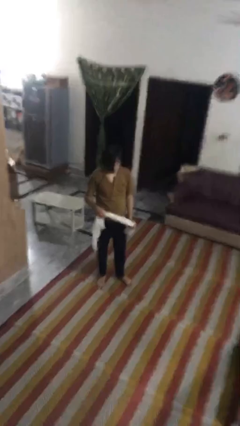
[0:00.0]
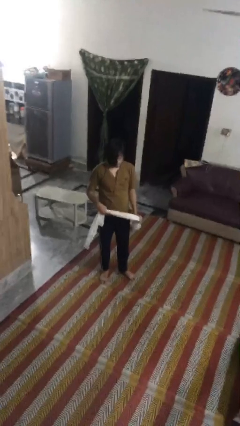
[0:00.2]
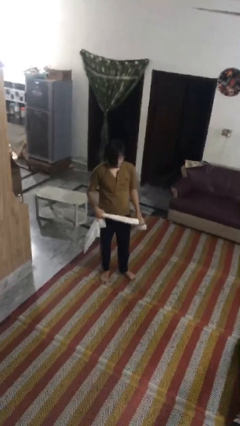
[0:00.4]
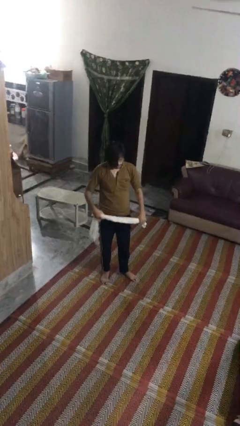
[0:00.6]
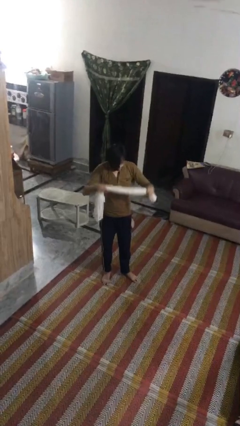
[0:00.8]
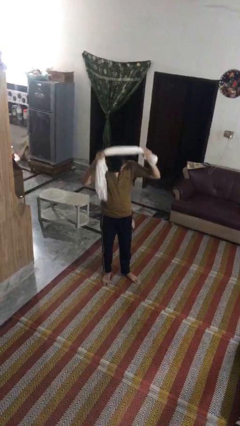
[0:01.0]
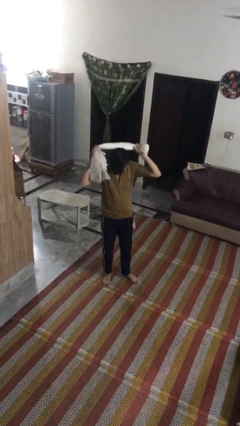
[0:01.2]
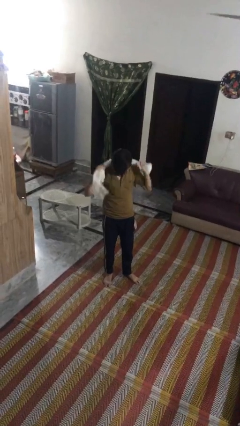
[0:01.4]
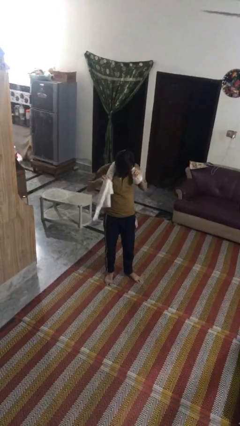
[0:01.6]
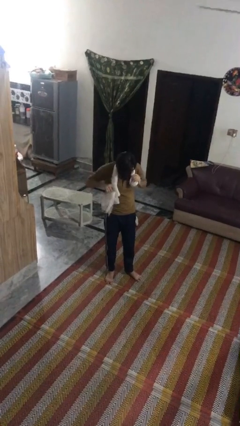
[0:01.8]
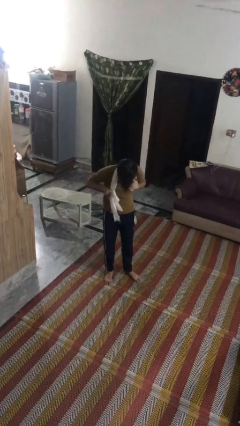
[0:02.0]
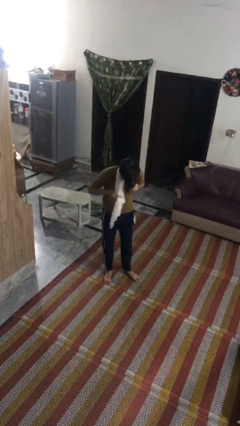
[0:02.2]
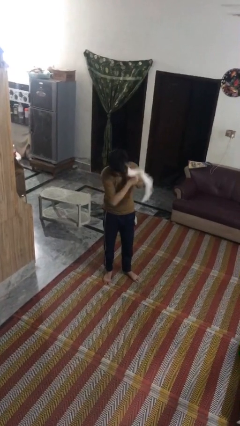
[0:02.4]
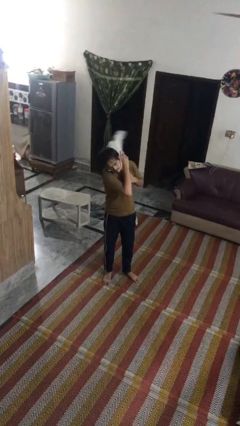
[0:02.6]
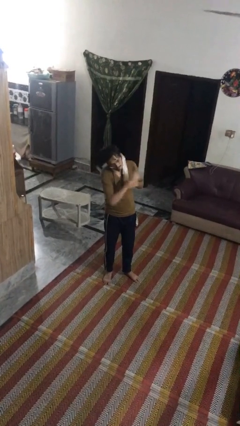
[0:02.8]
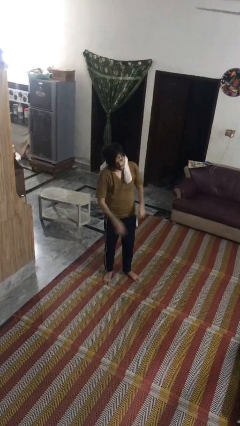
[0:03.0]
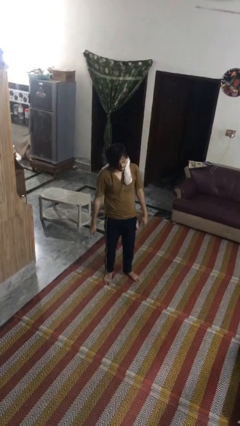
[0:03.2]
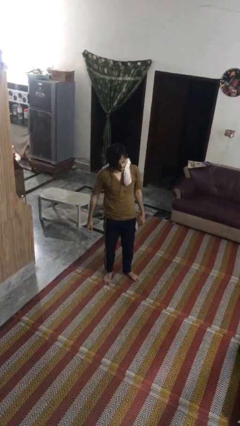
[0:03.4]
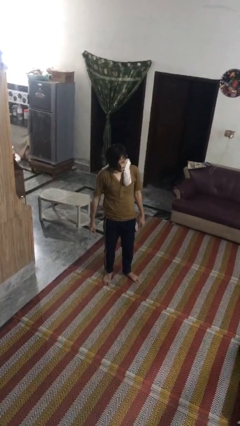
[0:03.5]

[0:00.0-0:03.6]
person puts on scarf

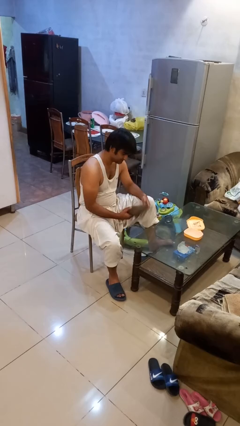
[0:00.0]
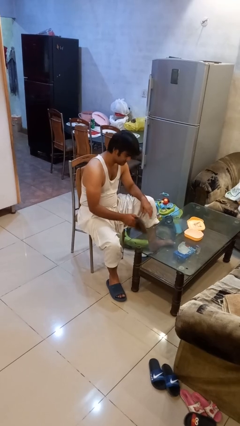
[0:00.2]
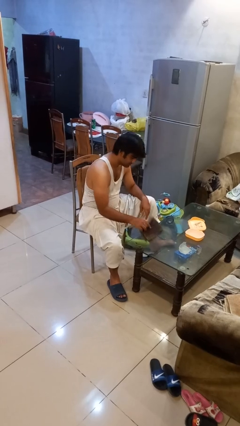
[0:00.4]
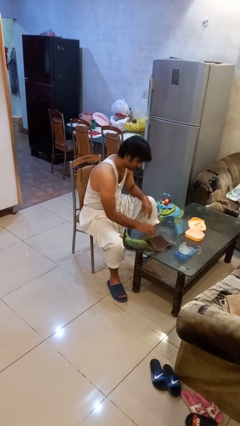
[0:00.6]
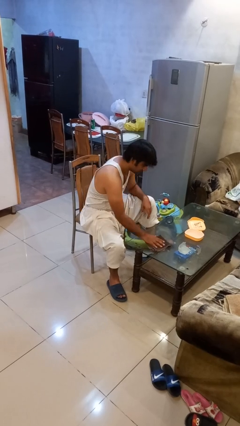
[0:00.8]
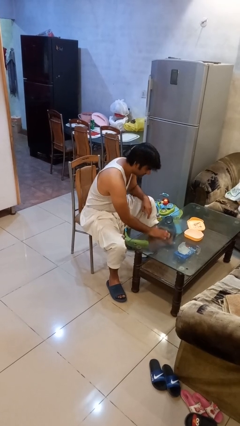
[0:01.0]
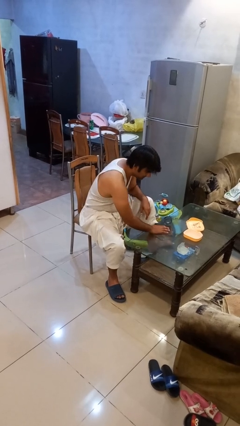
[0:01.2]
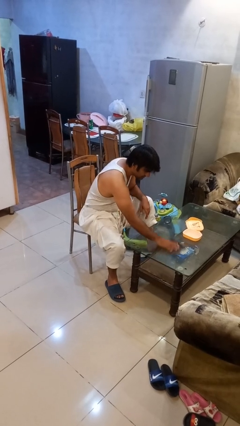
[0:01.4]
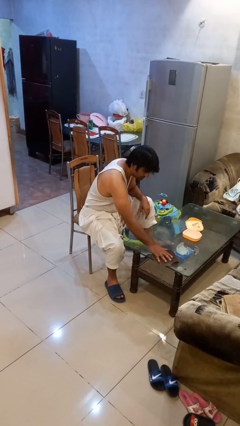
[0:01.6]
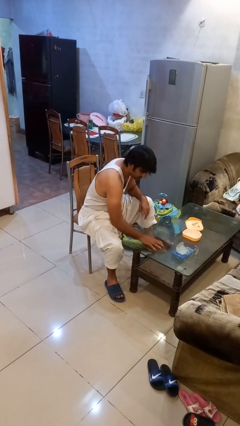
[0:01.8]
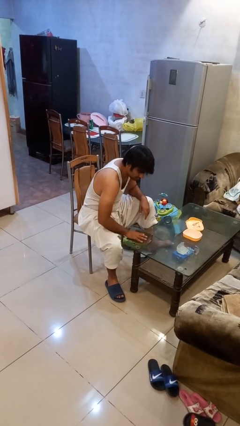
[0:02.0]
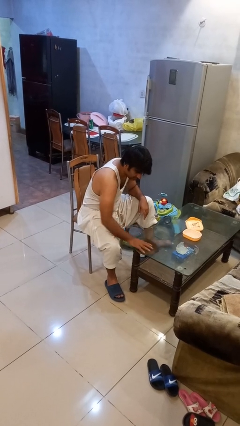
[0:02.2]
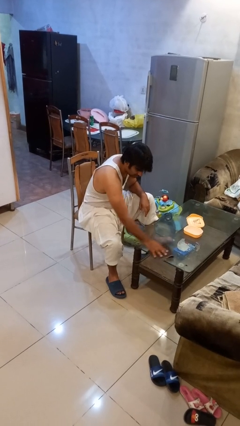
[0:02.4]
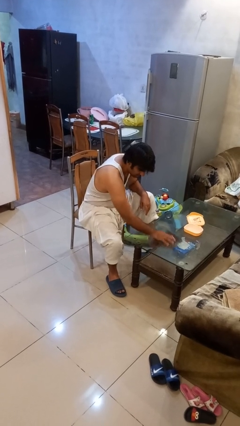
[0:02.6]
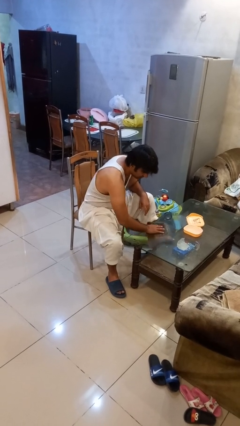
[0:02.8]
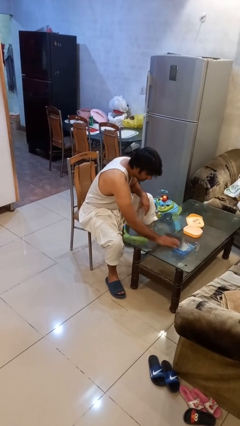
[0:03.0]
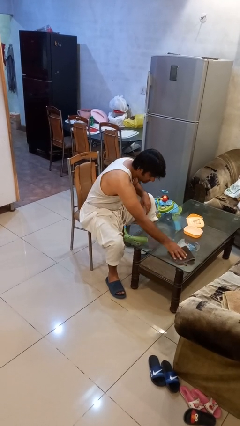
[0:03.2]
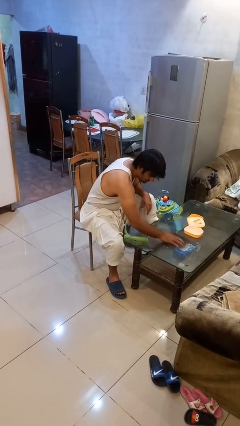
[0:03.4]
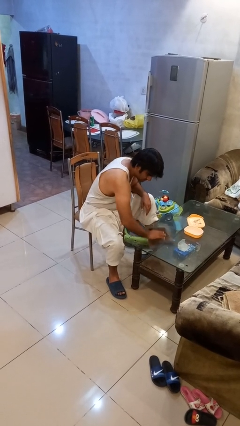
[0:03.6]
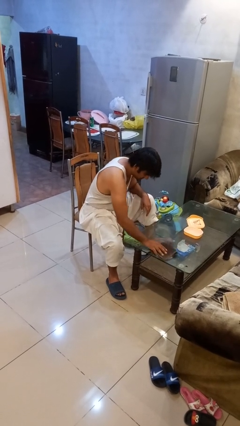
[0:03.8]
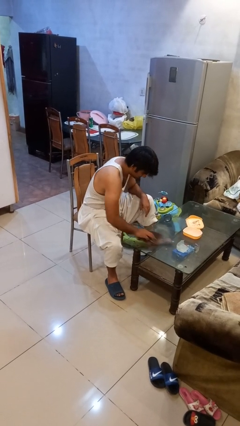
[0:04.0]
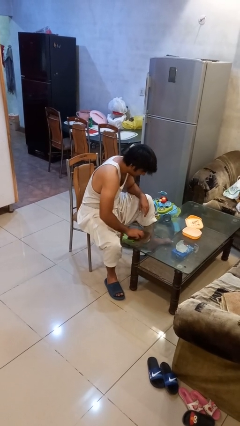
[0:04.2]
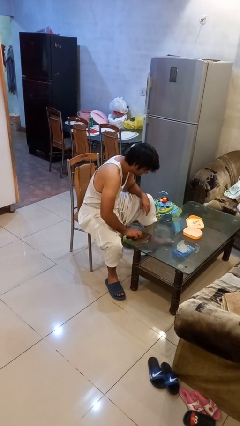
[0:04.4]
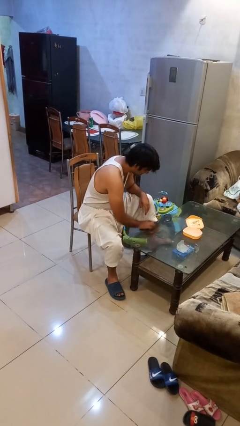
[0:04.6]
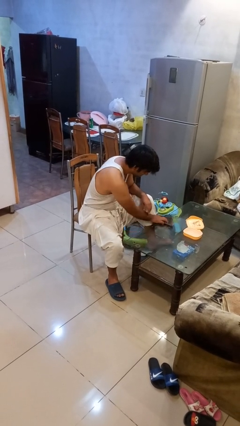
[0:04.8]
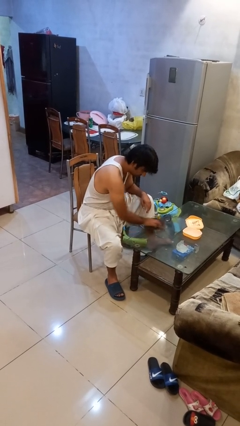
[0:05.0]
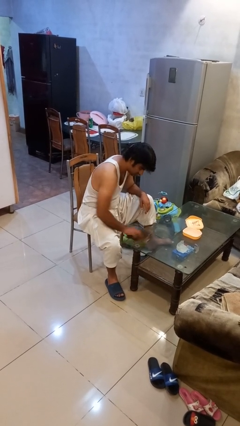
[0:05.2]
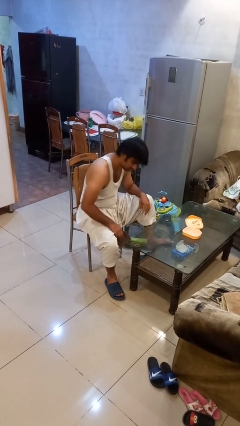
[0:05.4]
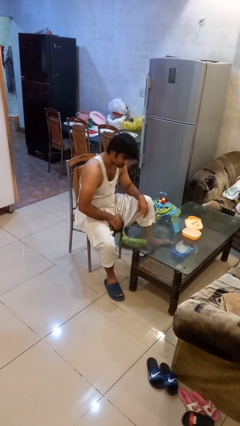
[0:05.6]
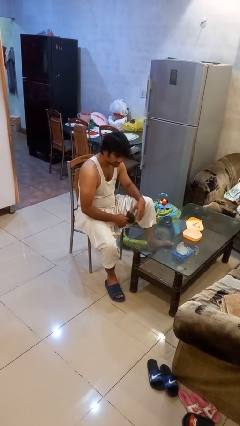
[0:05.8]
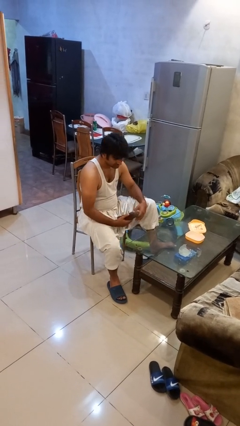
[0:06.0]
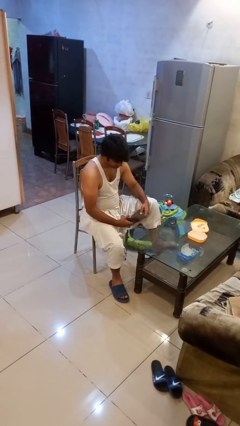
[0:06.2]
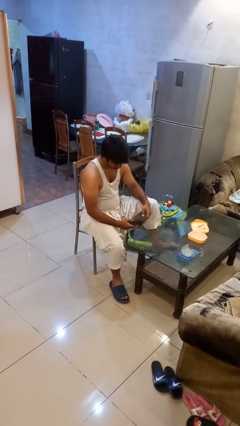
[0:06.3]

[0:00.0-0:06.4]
person cleans table with rag

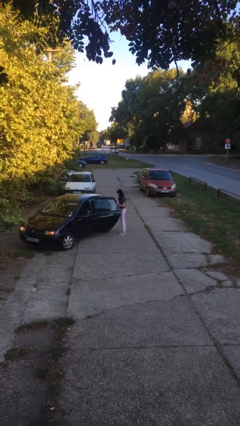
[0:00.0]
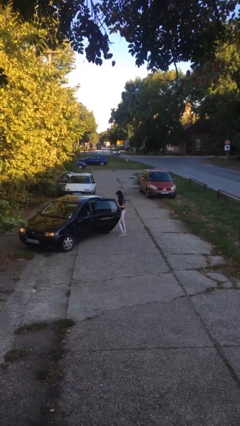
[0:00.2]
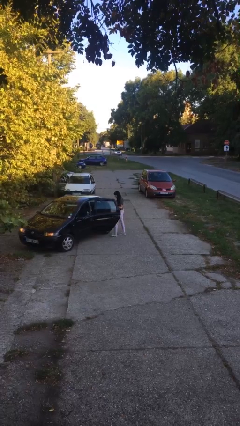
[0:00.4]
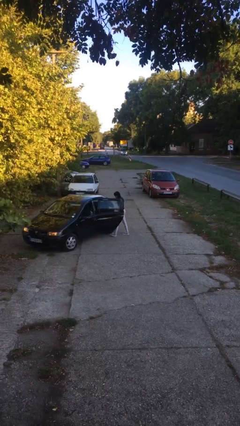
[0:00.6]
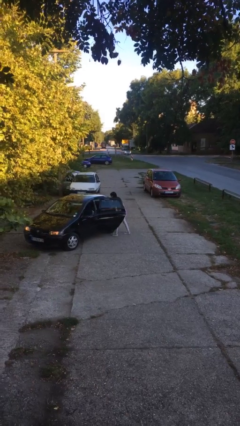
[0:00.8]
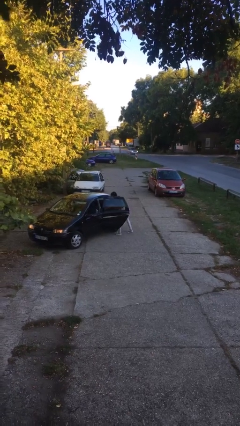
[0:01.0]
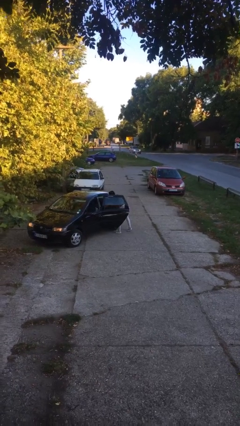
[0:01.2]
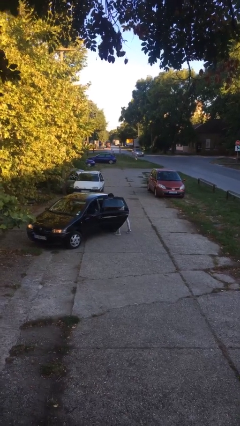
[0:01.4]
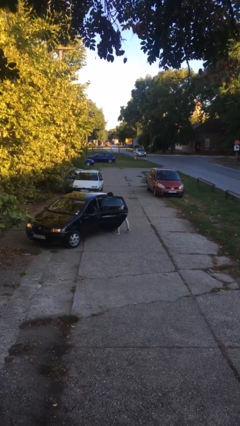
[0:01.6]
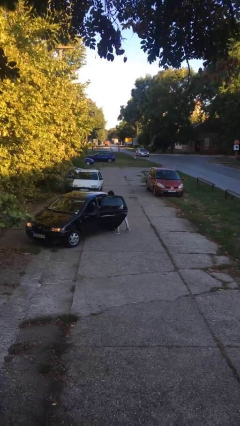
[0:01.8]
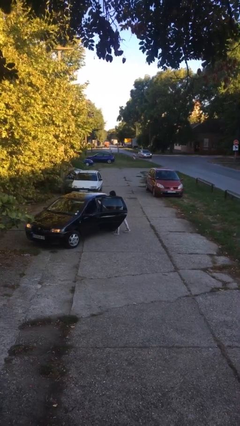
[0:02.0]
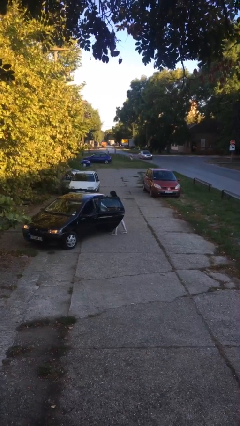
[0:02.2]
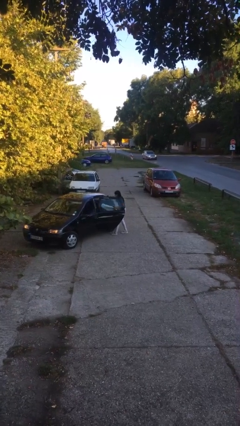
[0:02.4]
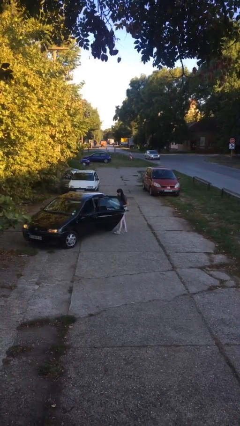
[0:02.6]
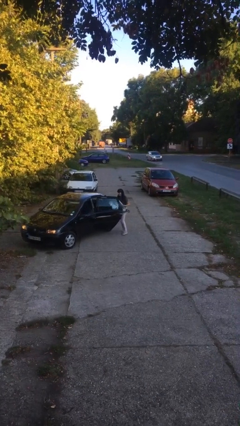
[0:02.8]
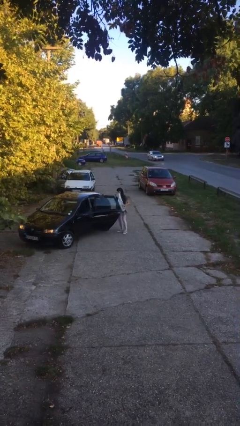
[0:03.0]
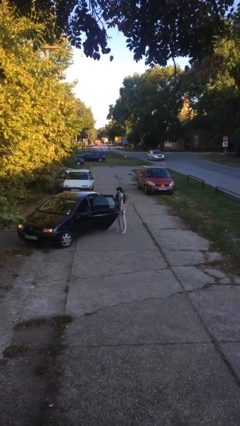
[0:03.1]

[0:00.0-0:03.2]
person unloads car

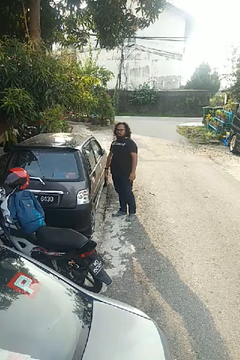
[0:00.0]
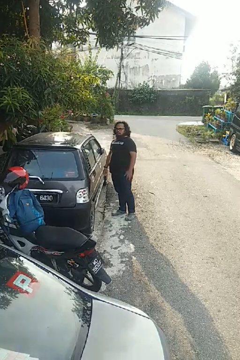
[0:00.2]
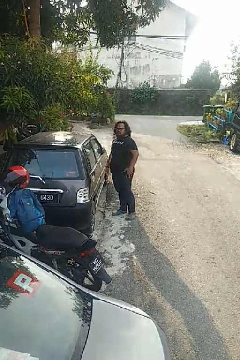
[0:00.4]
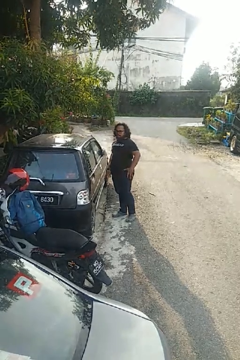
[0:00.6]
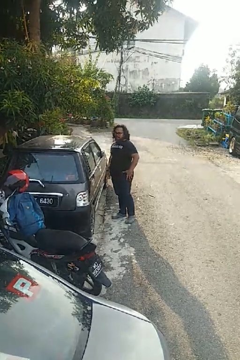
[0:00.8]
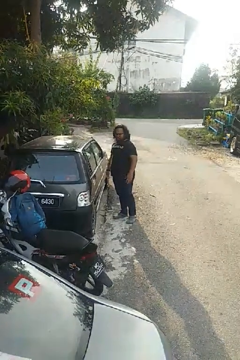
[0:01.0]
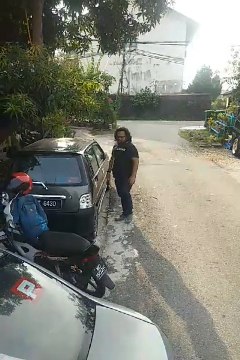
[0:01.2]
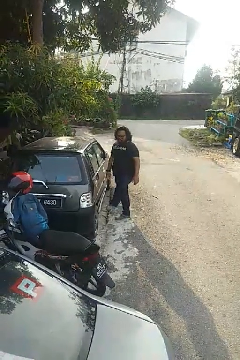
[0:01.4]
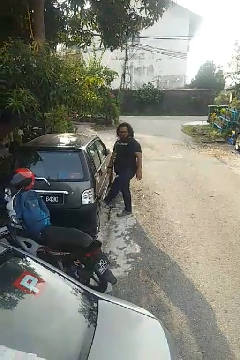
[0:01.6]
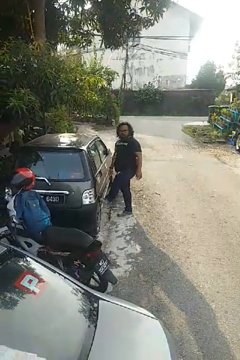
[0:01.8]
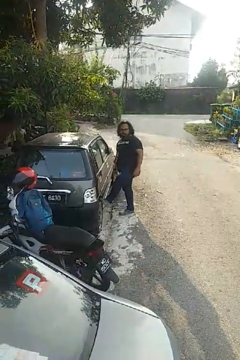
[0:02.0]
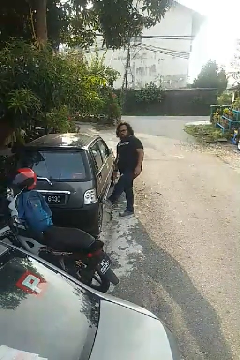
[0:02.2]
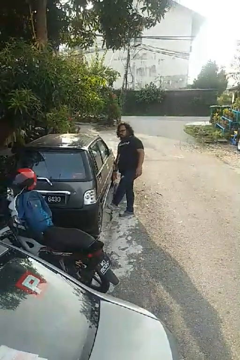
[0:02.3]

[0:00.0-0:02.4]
person kicks car tires

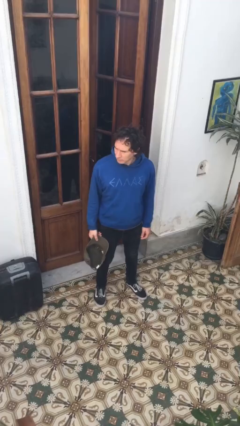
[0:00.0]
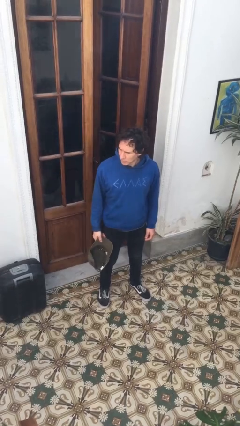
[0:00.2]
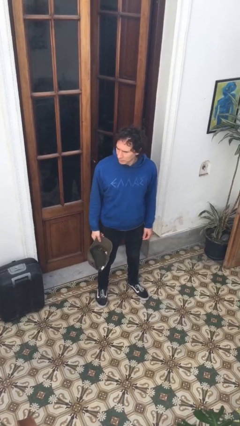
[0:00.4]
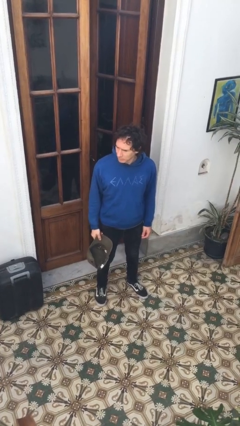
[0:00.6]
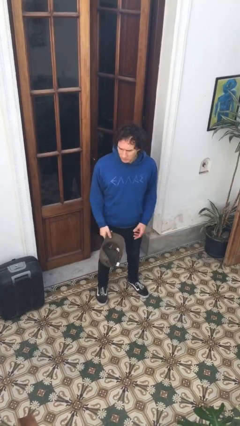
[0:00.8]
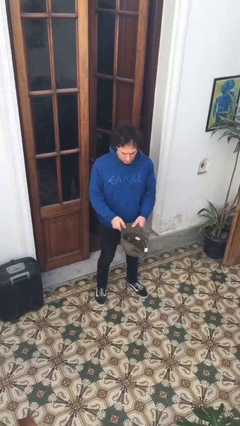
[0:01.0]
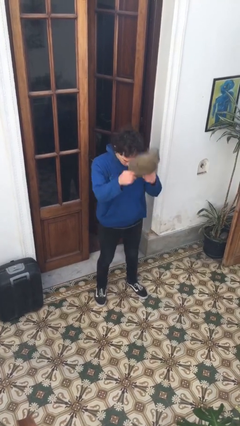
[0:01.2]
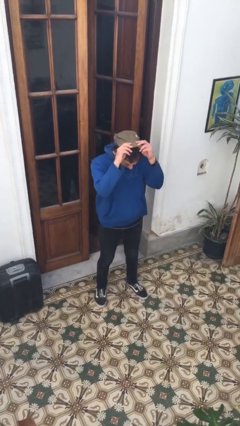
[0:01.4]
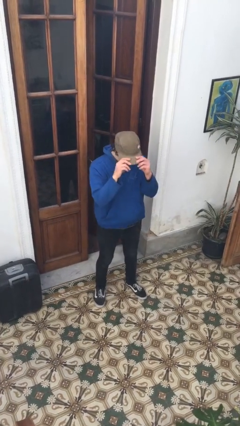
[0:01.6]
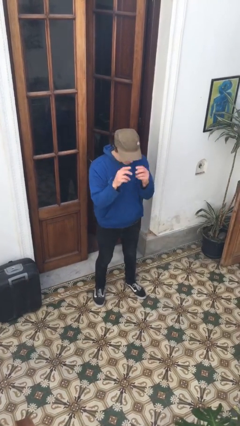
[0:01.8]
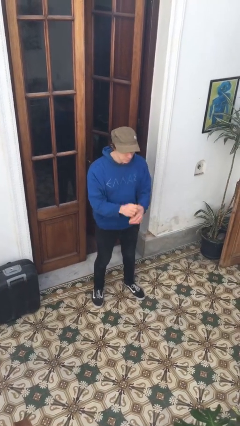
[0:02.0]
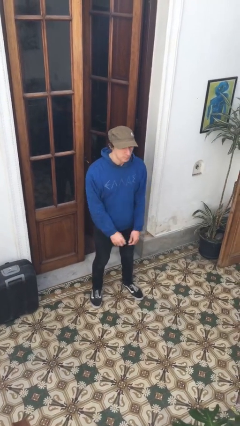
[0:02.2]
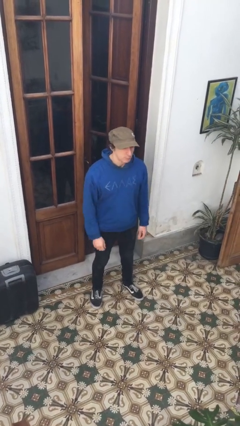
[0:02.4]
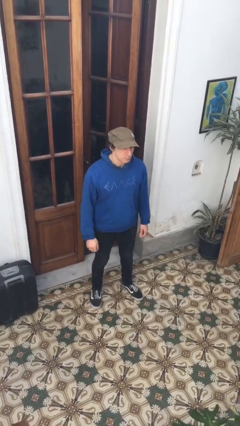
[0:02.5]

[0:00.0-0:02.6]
person puts on hat
